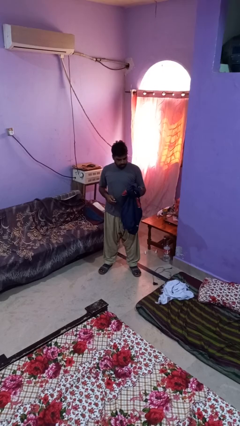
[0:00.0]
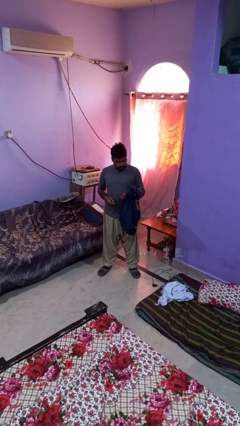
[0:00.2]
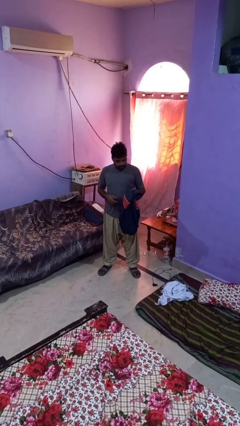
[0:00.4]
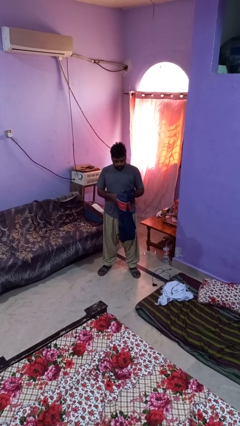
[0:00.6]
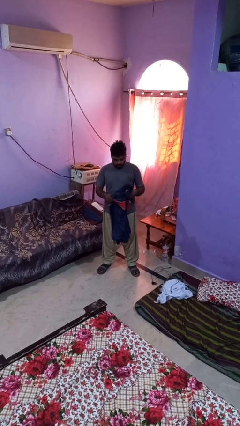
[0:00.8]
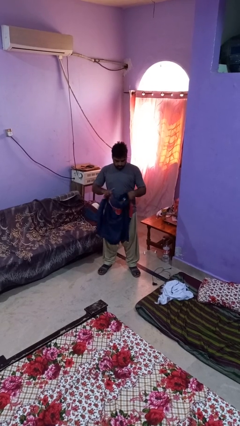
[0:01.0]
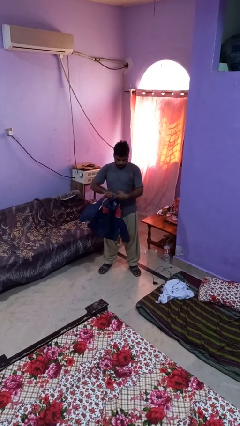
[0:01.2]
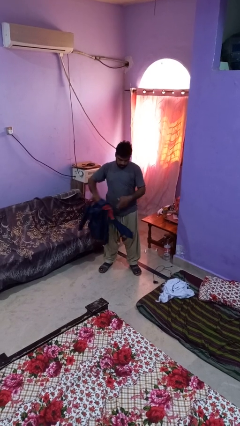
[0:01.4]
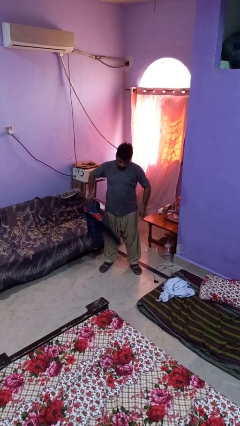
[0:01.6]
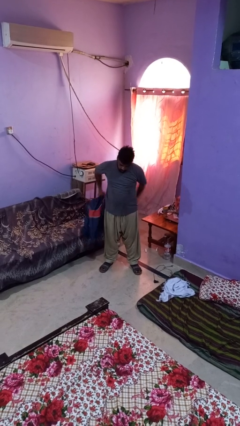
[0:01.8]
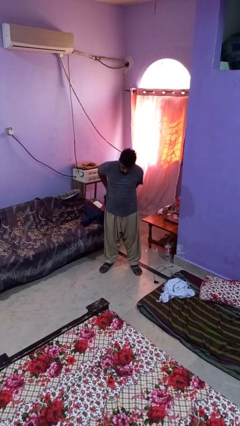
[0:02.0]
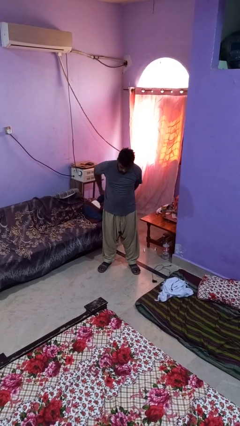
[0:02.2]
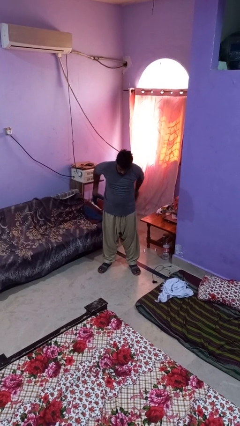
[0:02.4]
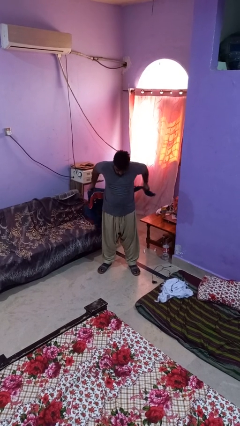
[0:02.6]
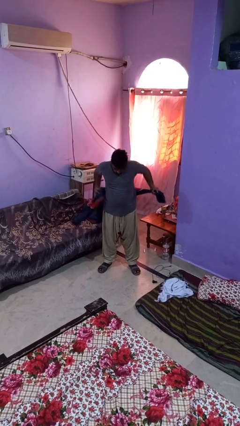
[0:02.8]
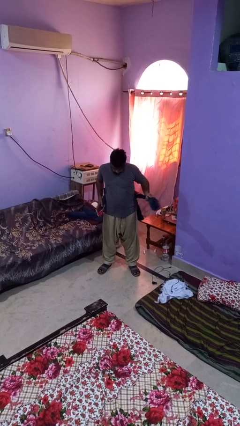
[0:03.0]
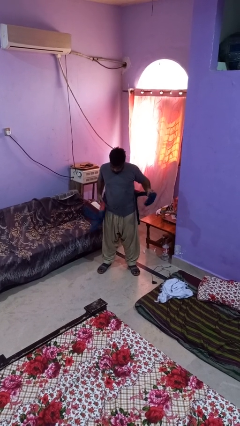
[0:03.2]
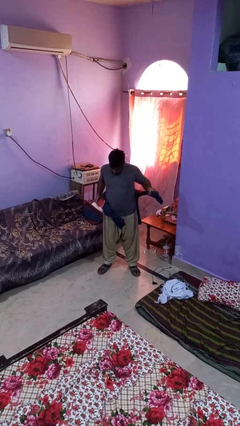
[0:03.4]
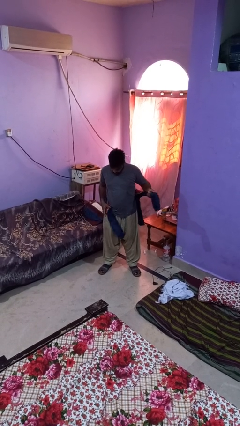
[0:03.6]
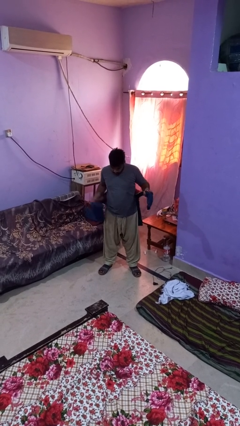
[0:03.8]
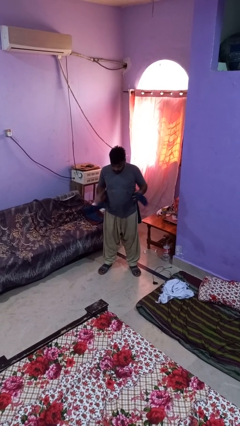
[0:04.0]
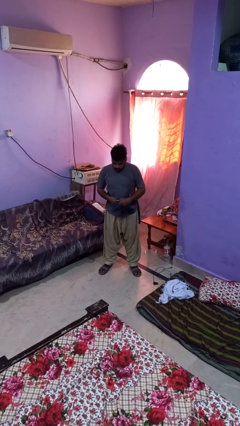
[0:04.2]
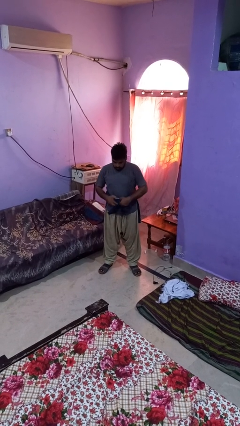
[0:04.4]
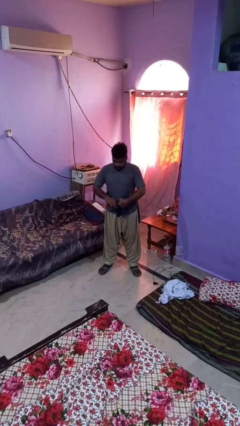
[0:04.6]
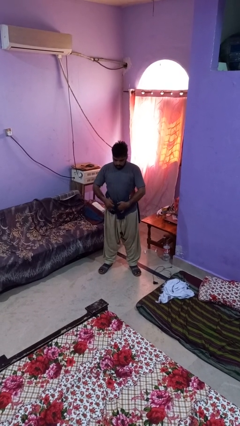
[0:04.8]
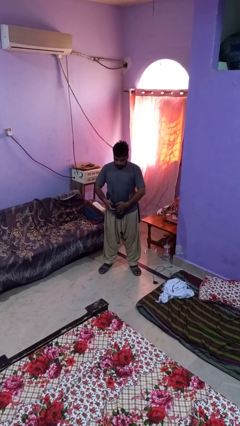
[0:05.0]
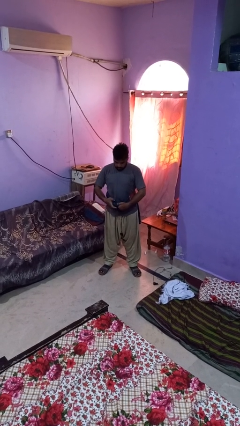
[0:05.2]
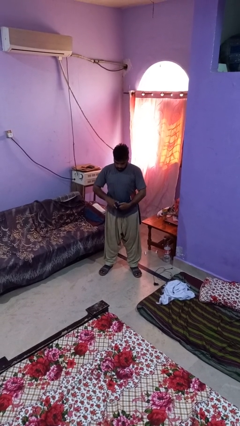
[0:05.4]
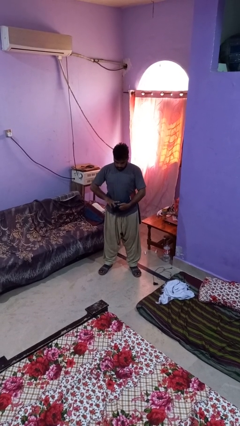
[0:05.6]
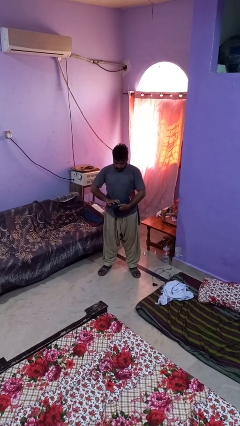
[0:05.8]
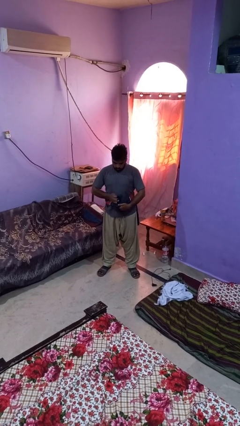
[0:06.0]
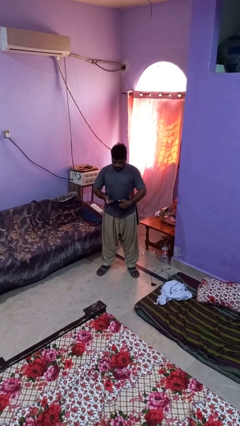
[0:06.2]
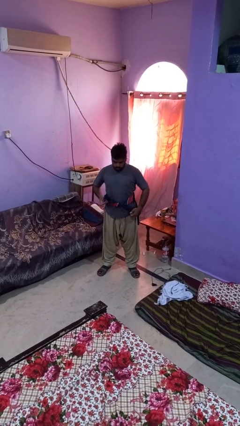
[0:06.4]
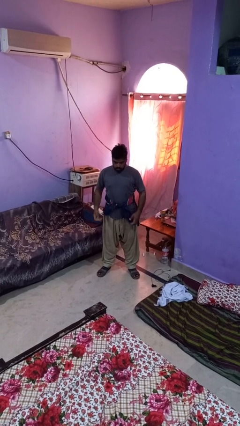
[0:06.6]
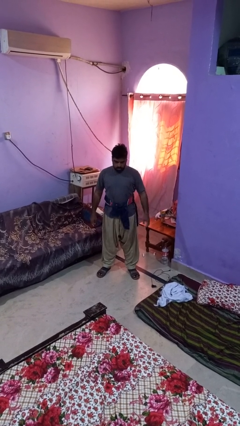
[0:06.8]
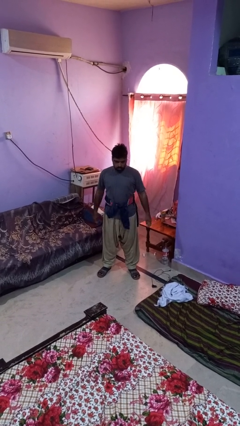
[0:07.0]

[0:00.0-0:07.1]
person ties jacket around waist

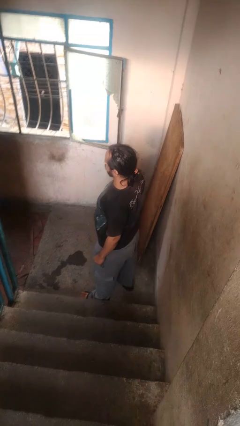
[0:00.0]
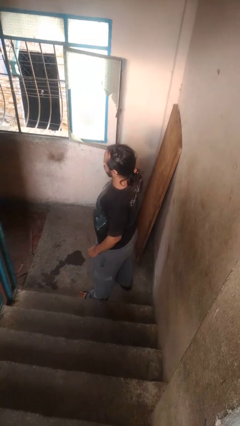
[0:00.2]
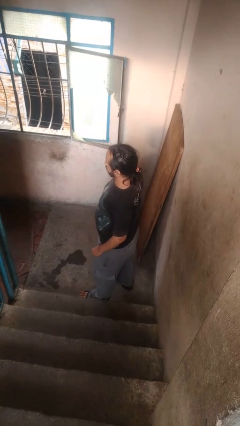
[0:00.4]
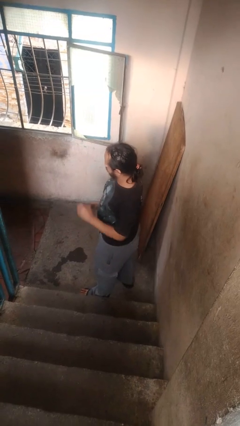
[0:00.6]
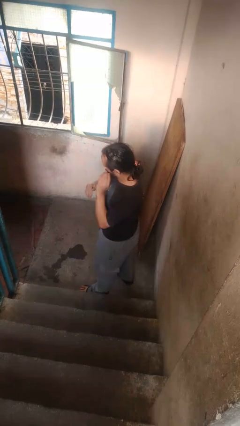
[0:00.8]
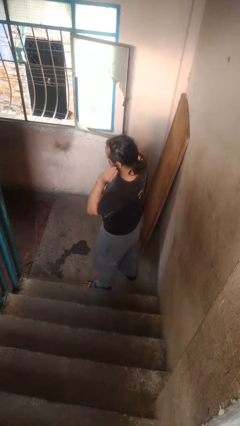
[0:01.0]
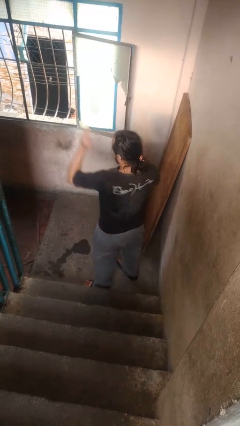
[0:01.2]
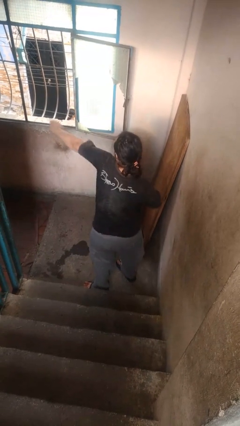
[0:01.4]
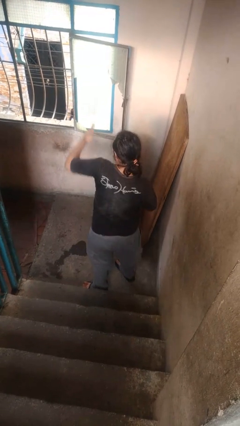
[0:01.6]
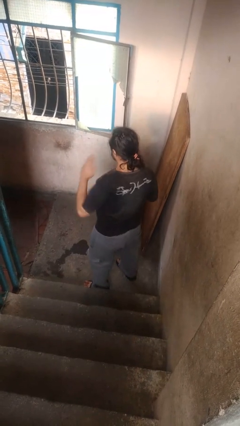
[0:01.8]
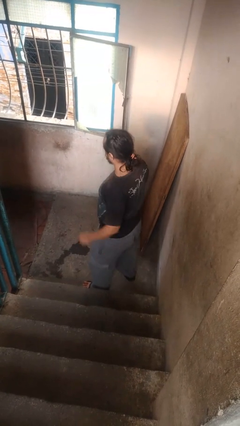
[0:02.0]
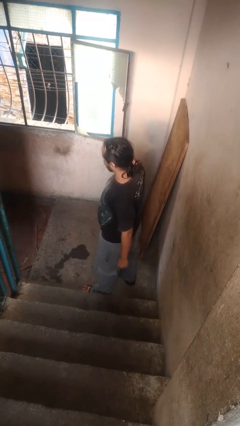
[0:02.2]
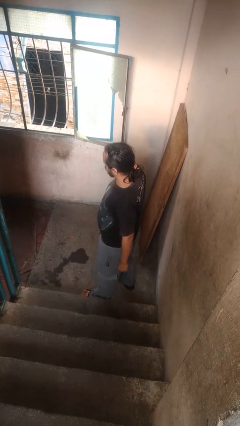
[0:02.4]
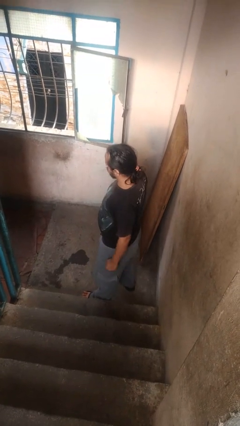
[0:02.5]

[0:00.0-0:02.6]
person karate chop

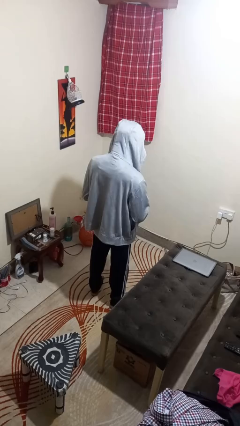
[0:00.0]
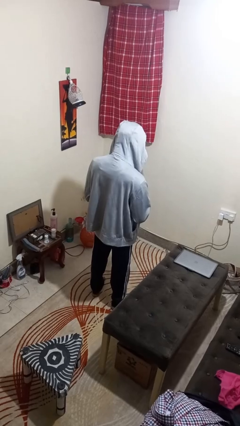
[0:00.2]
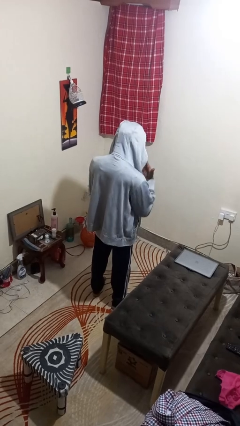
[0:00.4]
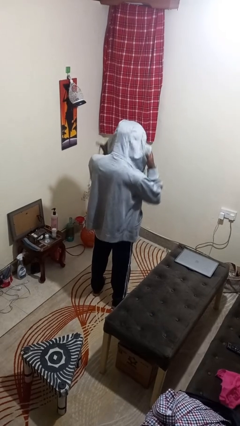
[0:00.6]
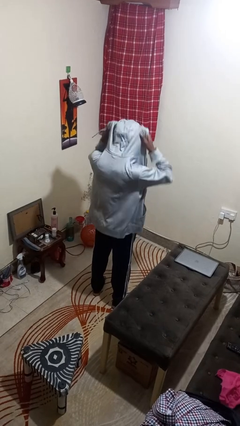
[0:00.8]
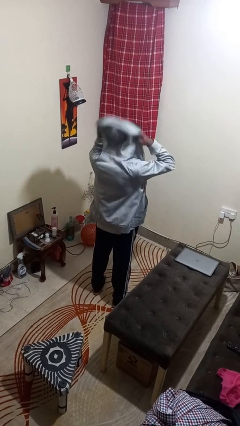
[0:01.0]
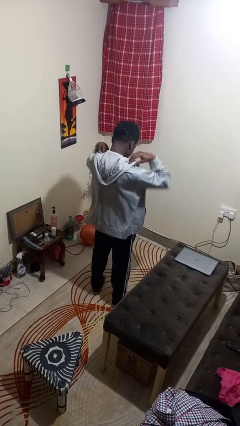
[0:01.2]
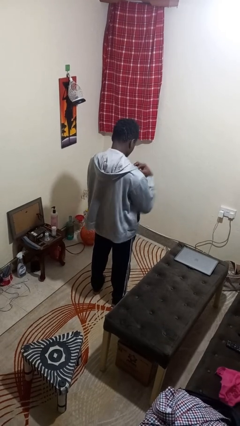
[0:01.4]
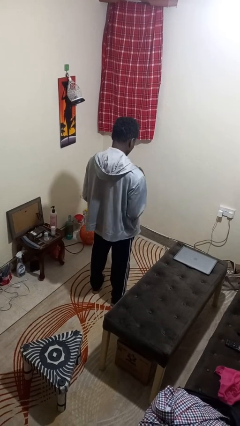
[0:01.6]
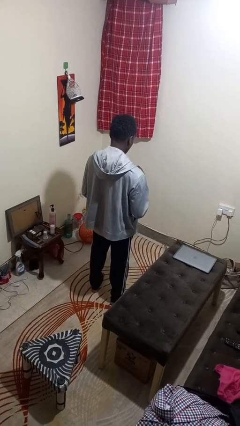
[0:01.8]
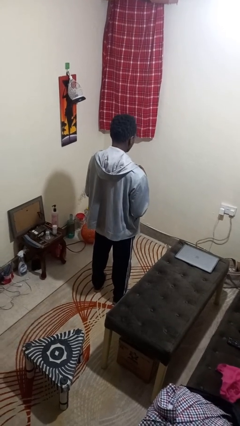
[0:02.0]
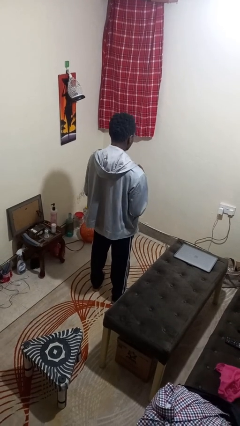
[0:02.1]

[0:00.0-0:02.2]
person takes off hoodie

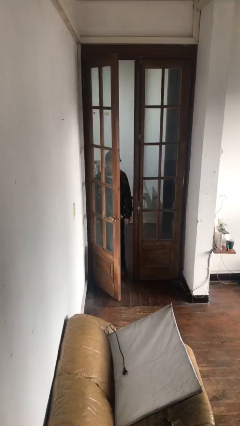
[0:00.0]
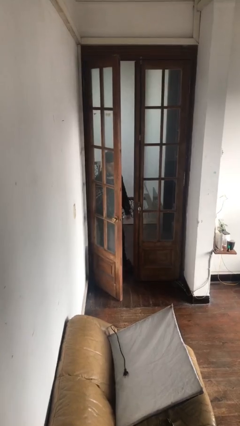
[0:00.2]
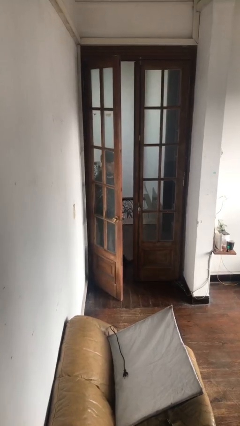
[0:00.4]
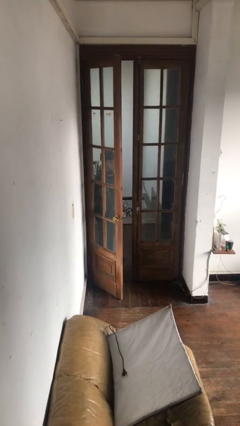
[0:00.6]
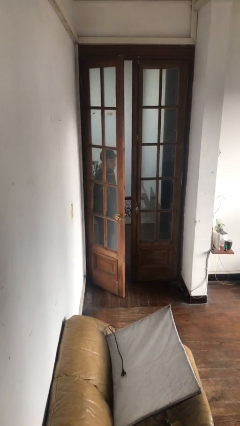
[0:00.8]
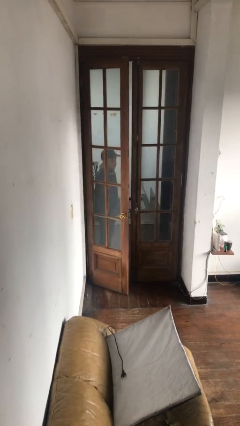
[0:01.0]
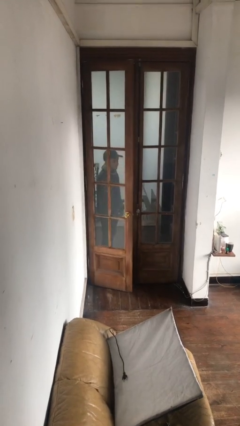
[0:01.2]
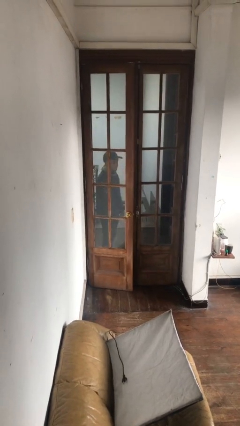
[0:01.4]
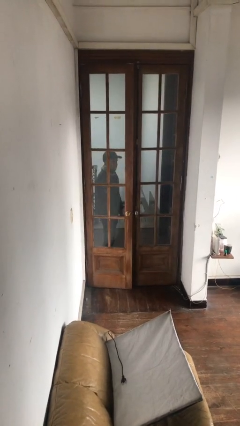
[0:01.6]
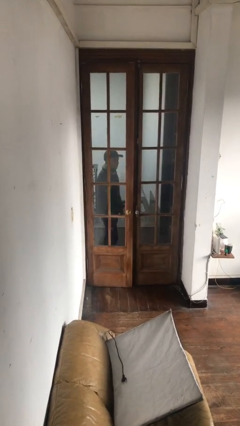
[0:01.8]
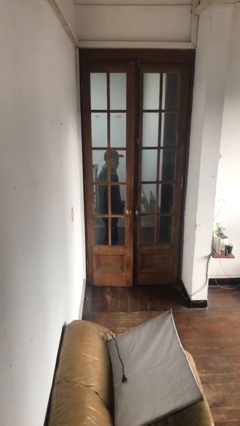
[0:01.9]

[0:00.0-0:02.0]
person closes facility door

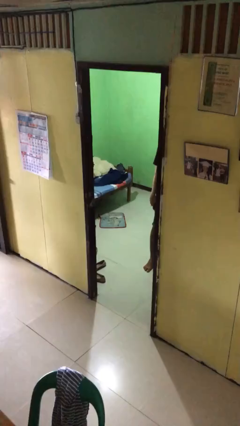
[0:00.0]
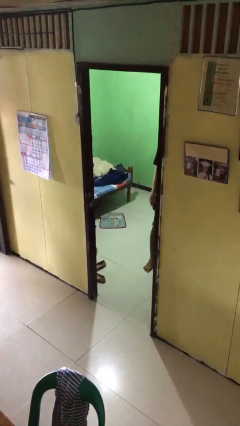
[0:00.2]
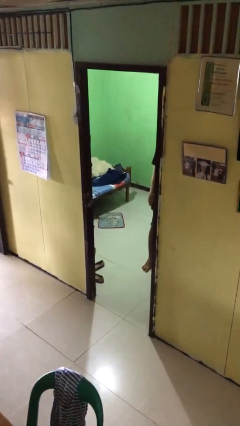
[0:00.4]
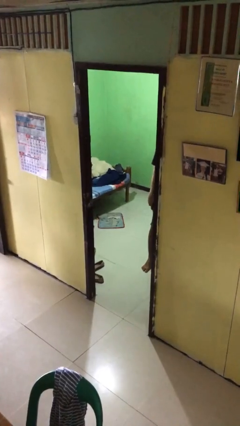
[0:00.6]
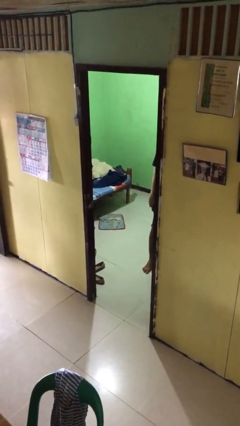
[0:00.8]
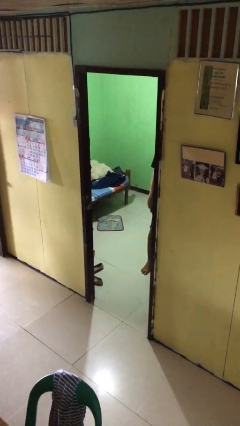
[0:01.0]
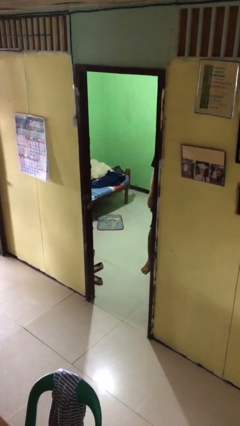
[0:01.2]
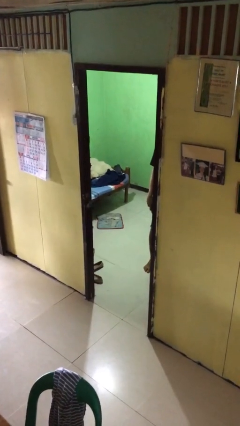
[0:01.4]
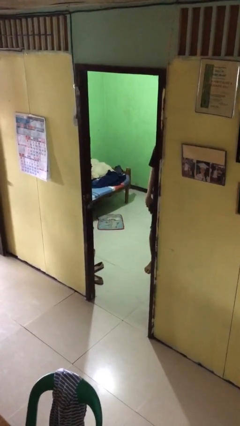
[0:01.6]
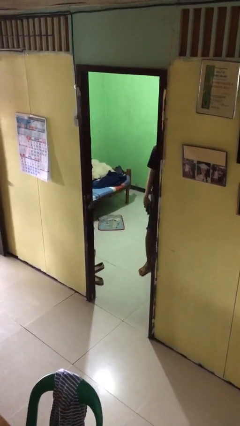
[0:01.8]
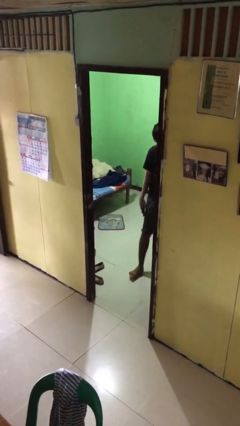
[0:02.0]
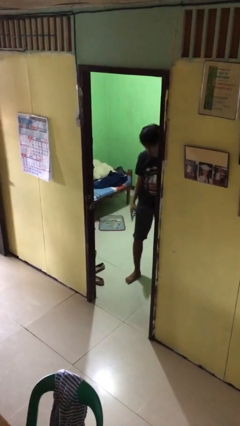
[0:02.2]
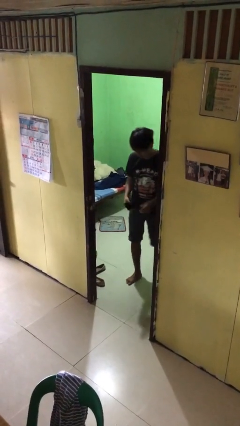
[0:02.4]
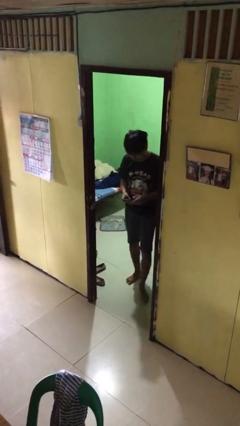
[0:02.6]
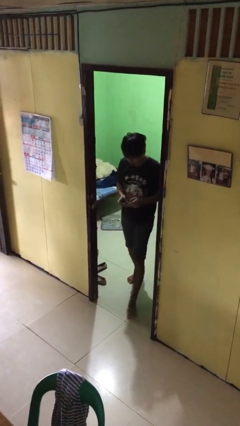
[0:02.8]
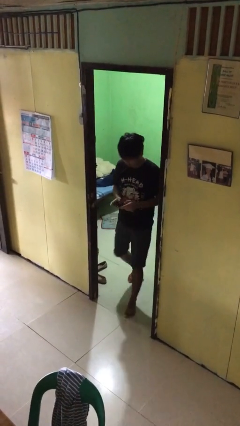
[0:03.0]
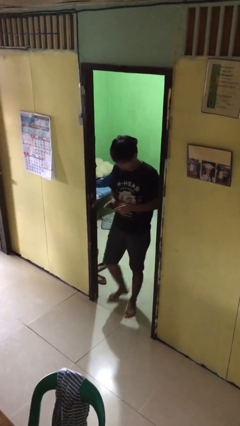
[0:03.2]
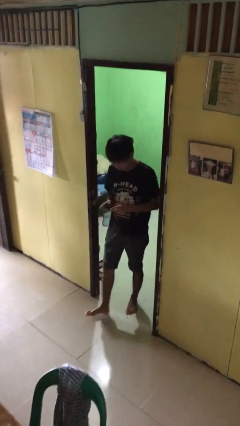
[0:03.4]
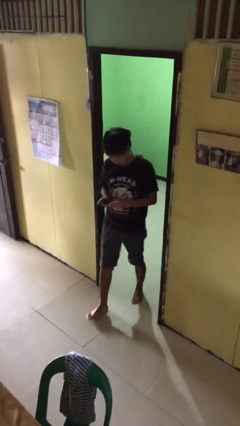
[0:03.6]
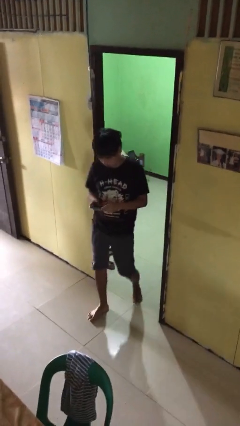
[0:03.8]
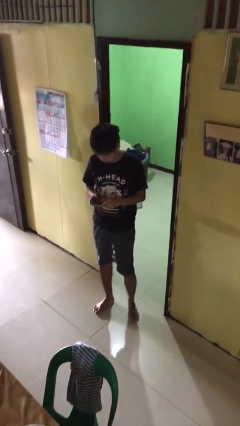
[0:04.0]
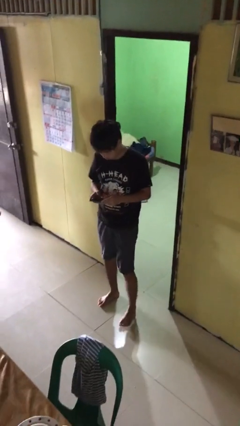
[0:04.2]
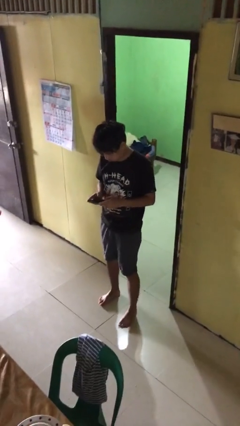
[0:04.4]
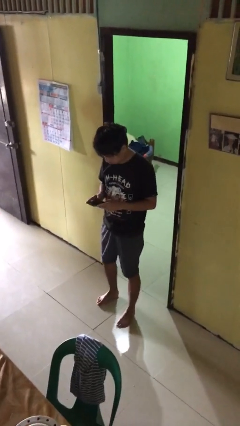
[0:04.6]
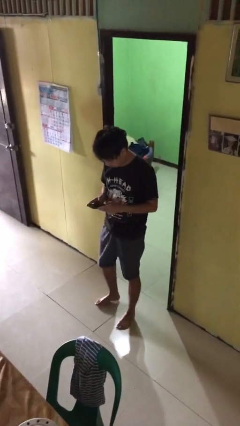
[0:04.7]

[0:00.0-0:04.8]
person enters scene through structure
